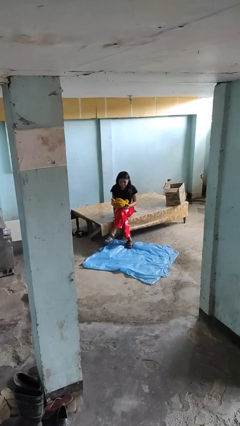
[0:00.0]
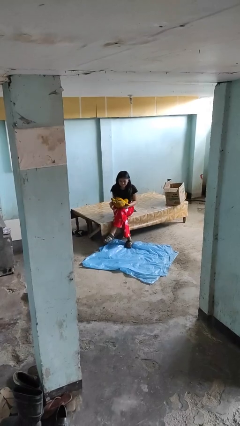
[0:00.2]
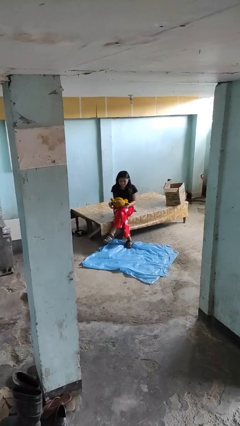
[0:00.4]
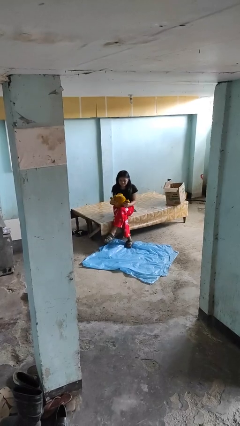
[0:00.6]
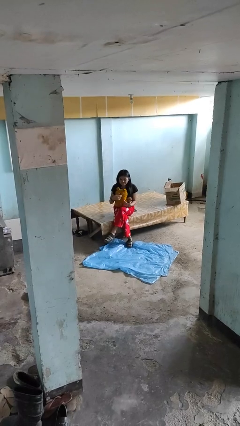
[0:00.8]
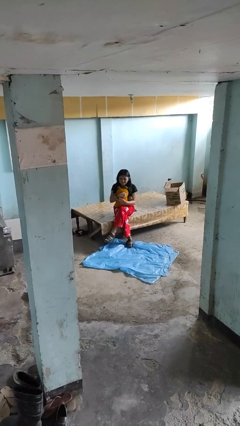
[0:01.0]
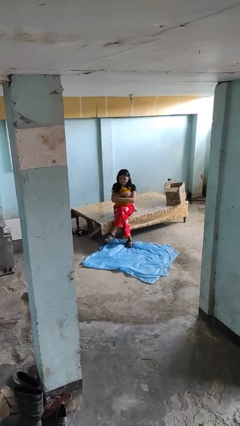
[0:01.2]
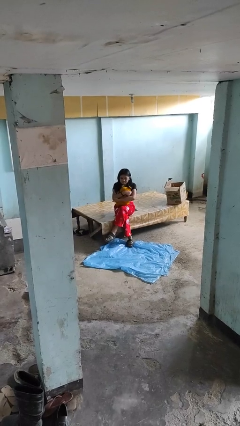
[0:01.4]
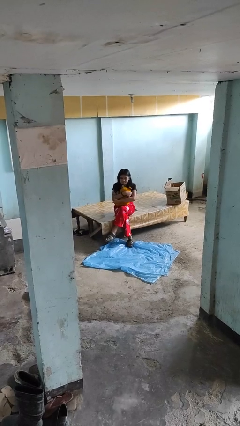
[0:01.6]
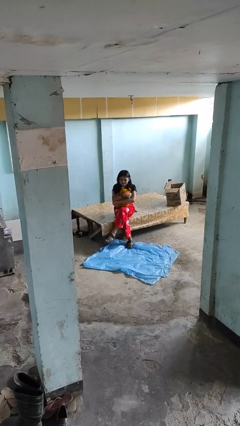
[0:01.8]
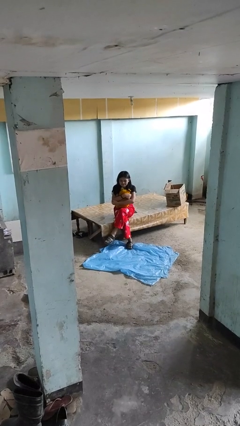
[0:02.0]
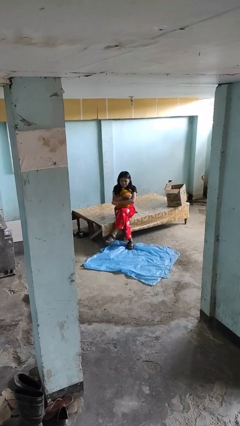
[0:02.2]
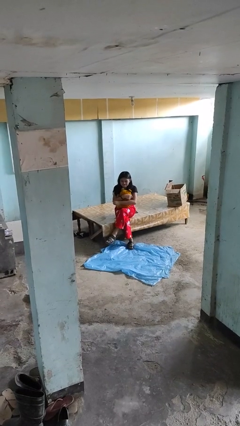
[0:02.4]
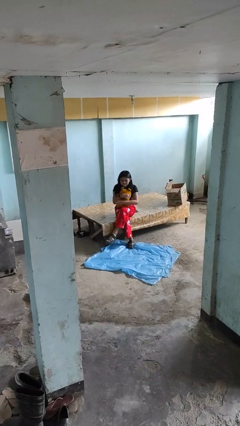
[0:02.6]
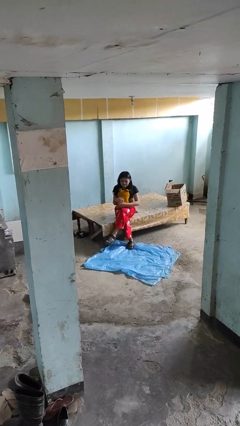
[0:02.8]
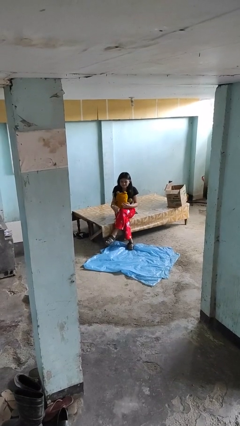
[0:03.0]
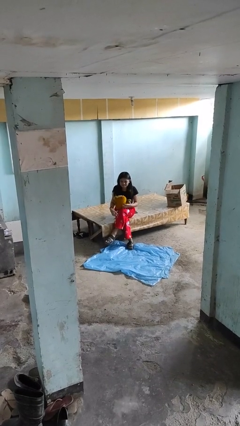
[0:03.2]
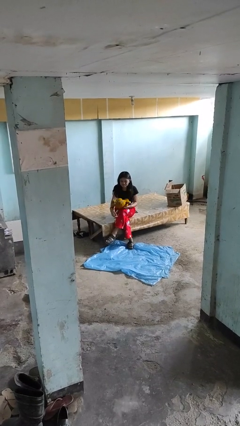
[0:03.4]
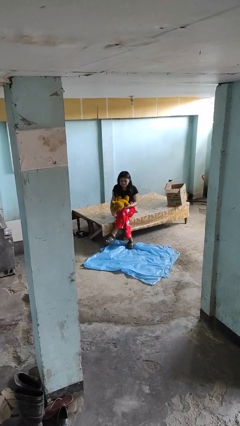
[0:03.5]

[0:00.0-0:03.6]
person hugs stuffed animal

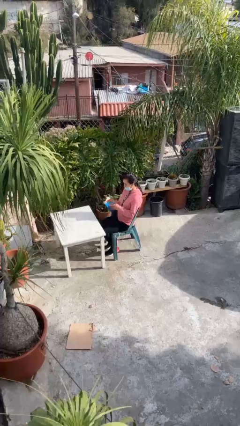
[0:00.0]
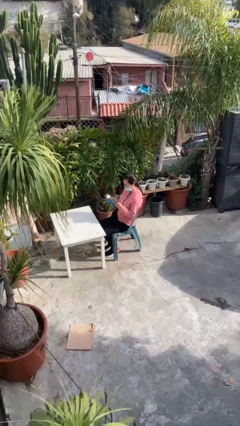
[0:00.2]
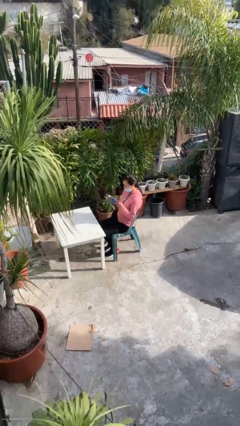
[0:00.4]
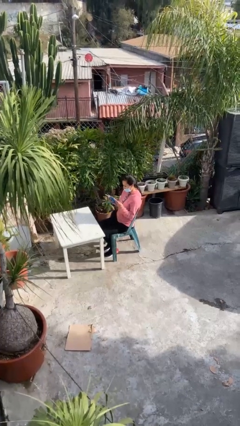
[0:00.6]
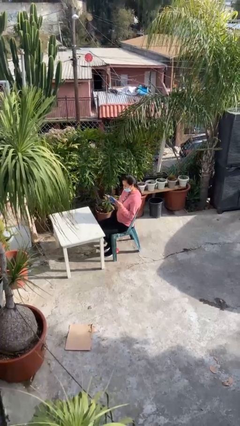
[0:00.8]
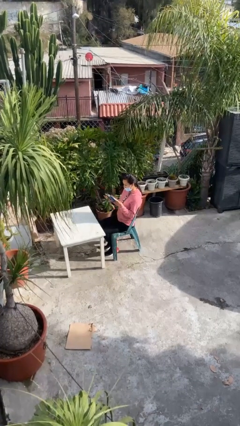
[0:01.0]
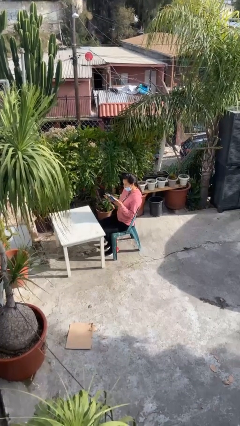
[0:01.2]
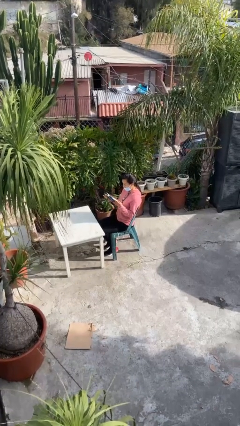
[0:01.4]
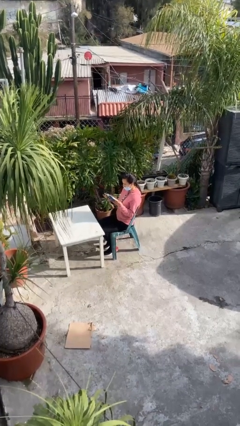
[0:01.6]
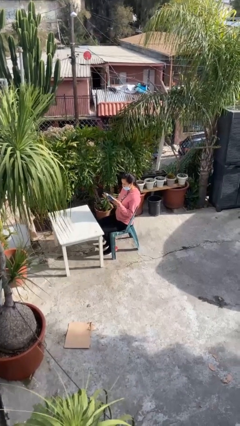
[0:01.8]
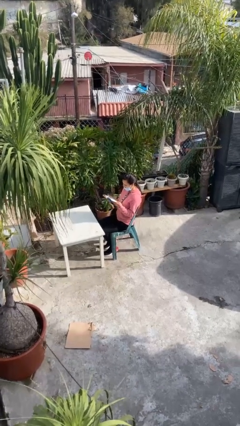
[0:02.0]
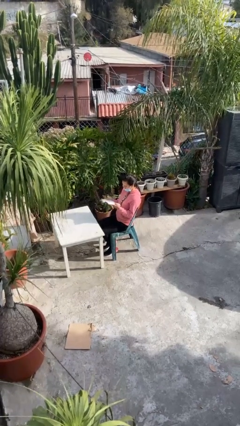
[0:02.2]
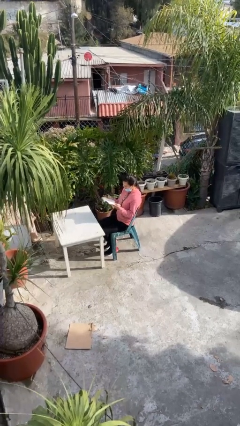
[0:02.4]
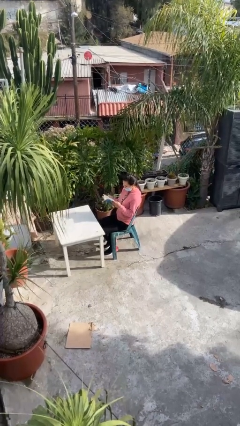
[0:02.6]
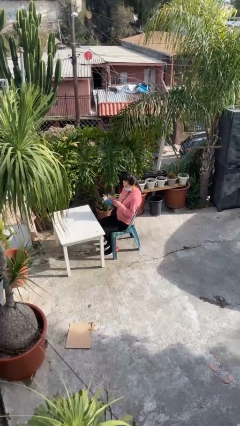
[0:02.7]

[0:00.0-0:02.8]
person reads document

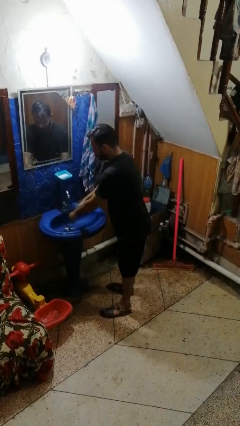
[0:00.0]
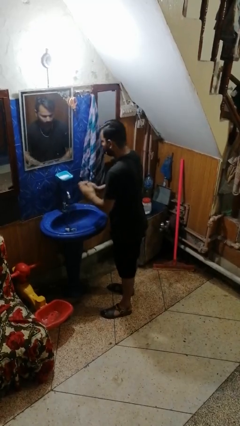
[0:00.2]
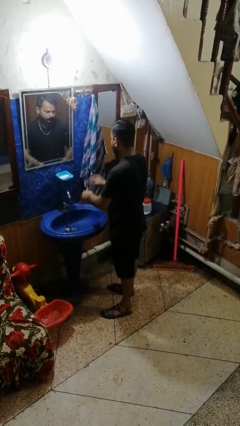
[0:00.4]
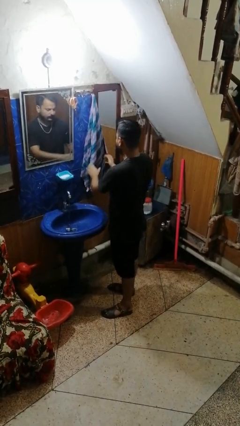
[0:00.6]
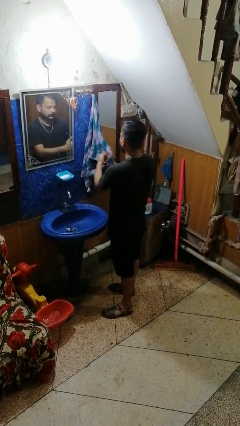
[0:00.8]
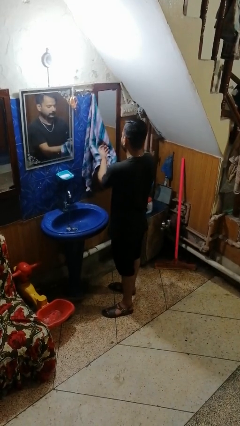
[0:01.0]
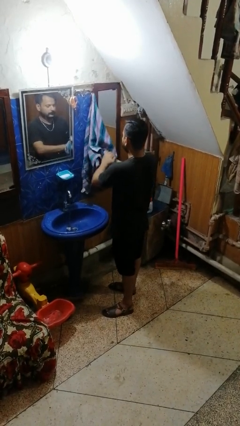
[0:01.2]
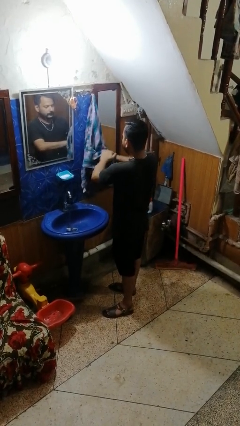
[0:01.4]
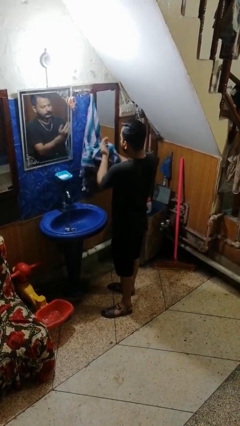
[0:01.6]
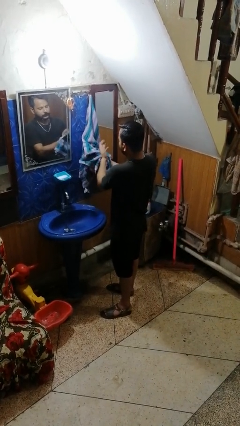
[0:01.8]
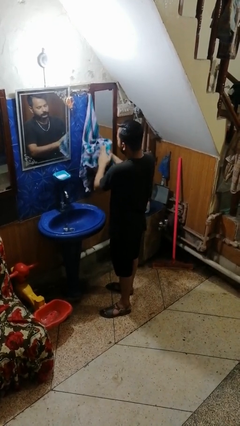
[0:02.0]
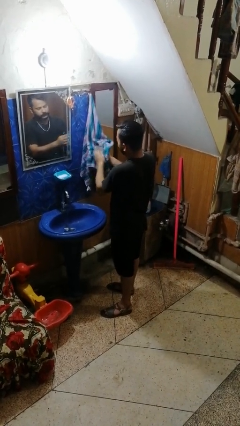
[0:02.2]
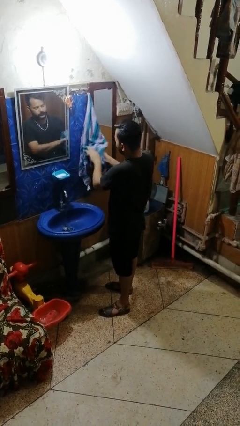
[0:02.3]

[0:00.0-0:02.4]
person dries hands with towel

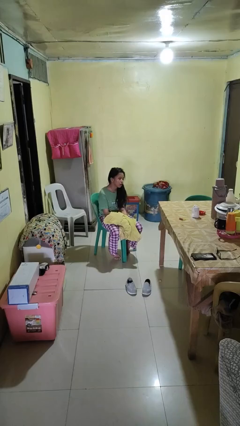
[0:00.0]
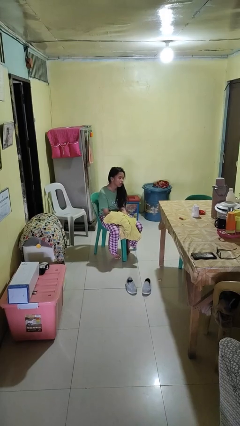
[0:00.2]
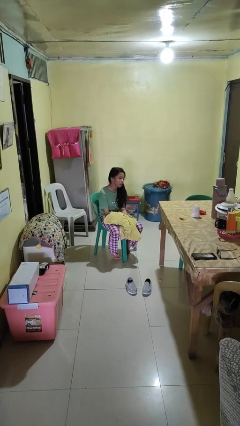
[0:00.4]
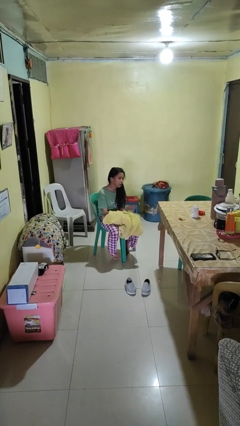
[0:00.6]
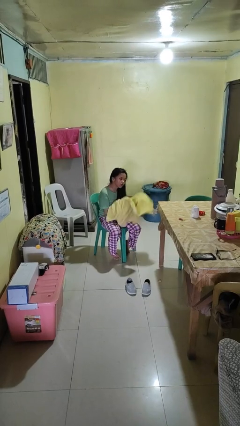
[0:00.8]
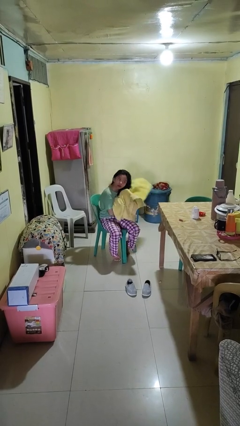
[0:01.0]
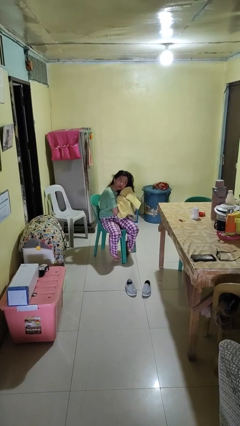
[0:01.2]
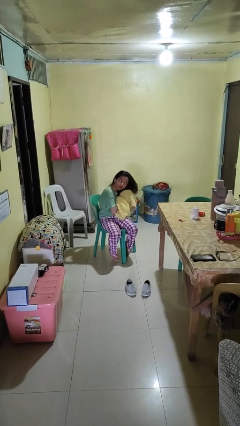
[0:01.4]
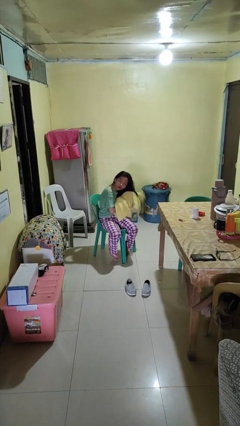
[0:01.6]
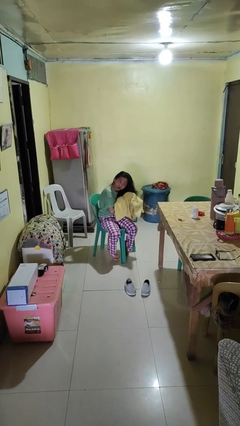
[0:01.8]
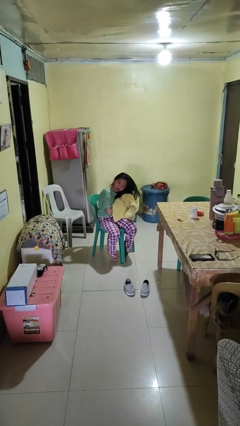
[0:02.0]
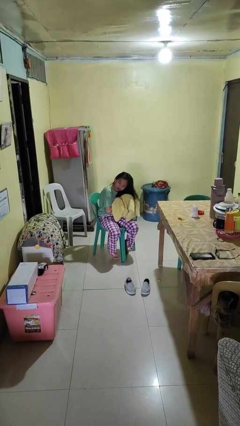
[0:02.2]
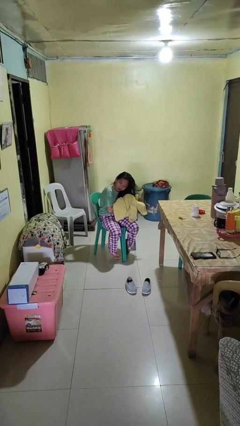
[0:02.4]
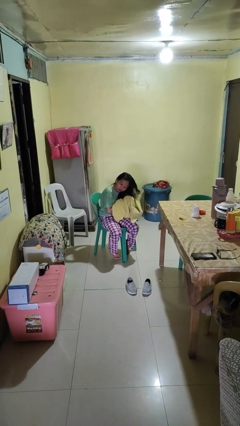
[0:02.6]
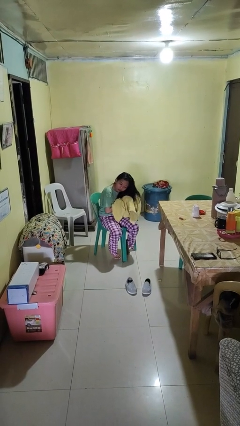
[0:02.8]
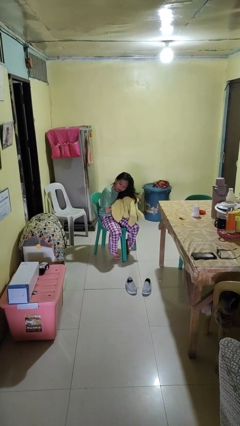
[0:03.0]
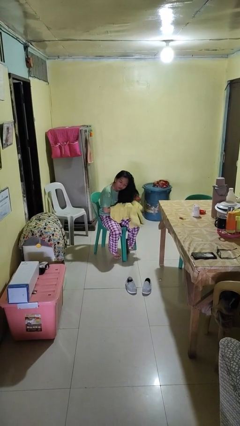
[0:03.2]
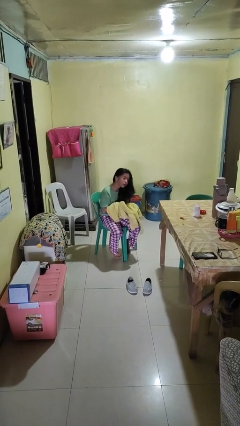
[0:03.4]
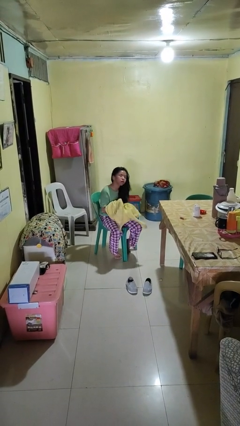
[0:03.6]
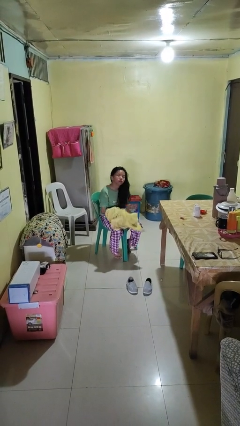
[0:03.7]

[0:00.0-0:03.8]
person dries hair with towel

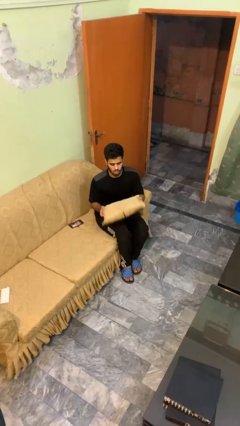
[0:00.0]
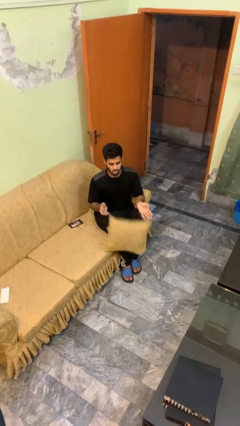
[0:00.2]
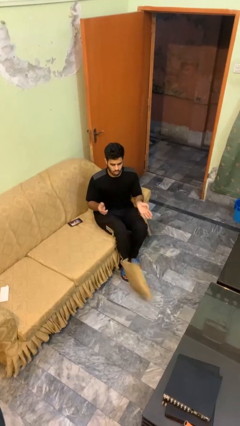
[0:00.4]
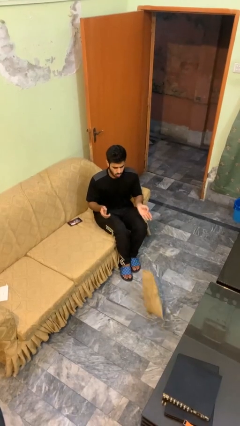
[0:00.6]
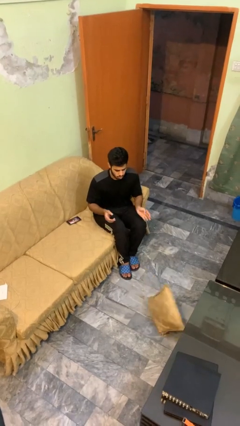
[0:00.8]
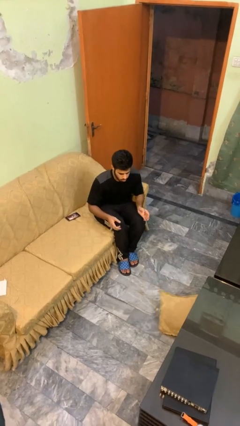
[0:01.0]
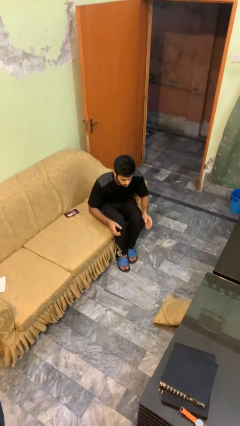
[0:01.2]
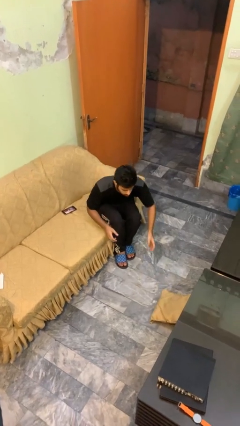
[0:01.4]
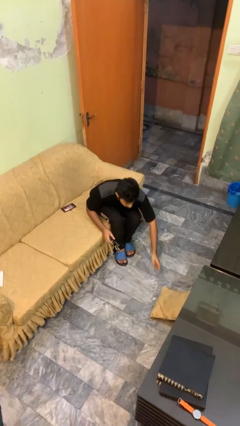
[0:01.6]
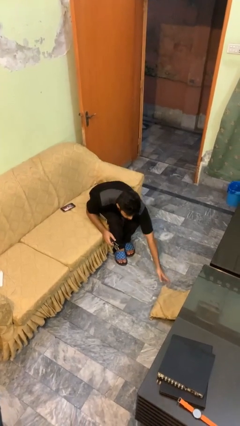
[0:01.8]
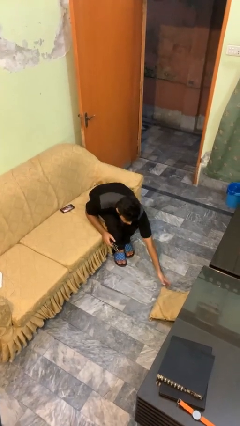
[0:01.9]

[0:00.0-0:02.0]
person drops object

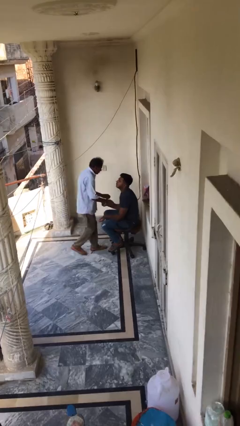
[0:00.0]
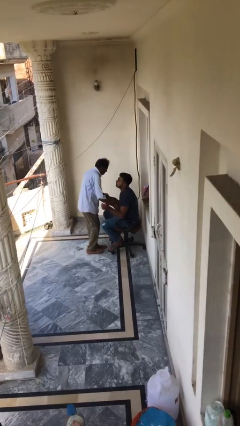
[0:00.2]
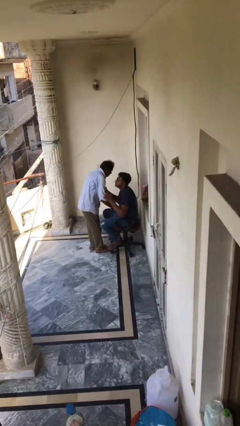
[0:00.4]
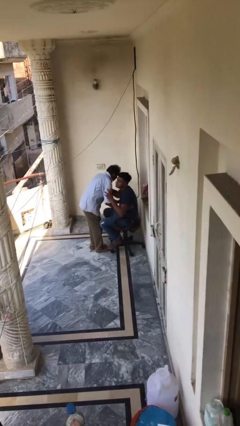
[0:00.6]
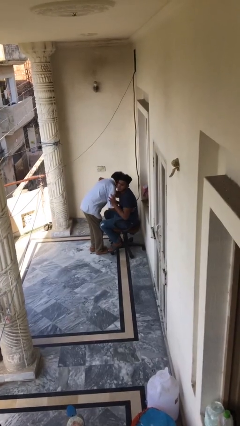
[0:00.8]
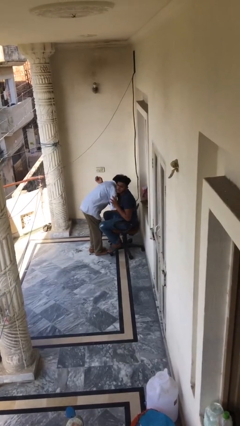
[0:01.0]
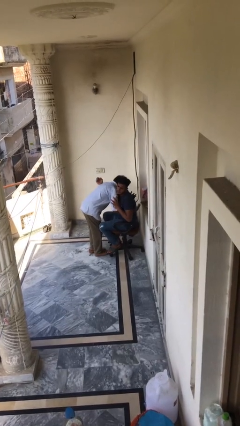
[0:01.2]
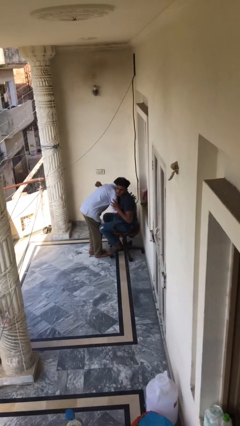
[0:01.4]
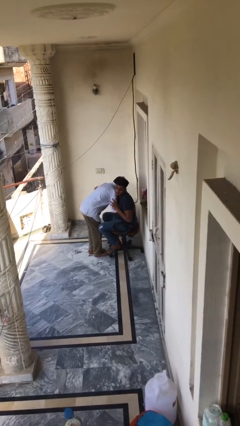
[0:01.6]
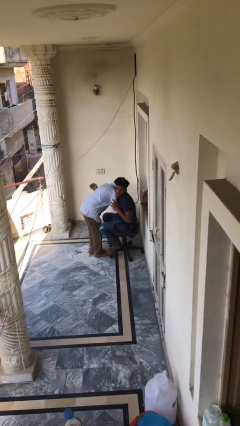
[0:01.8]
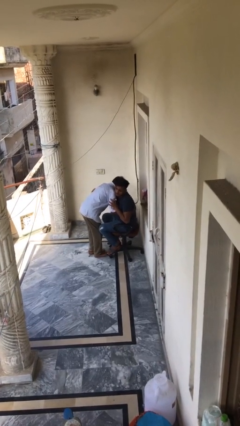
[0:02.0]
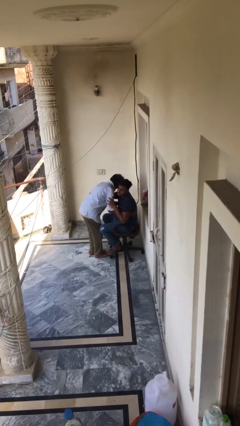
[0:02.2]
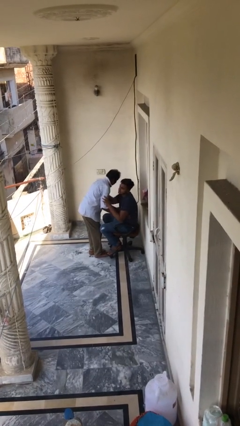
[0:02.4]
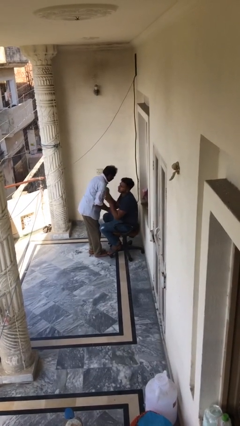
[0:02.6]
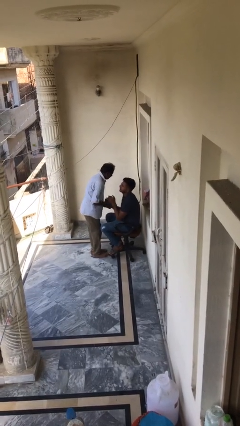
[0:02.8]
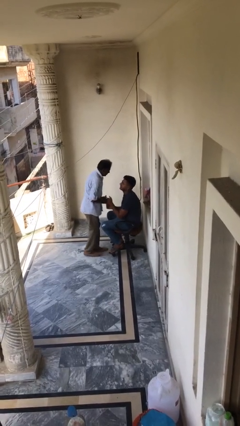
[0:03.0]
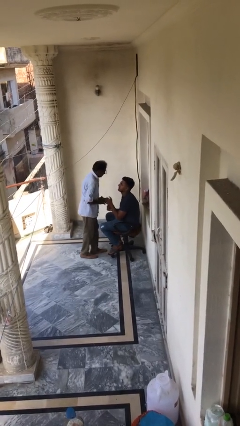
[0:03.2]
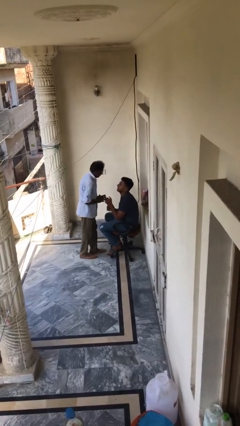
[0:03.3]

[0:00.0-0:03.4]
person embraces person
